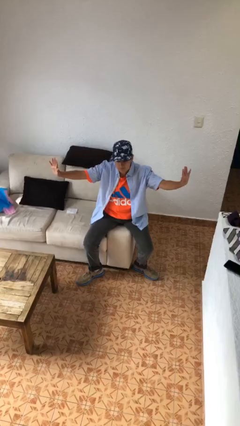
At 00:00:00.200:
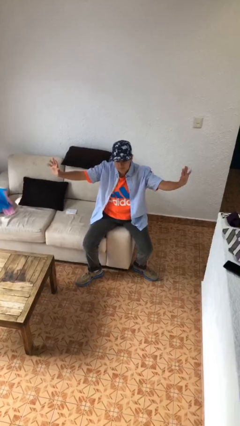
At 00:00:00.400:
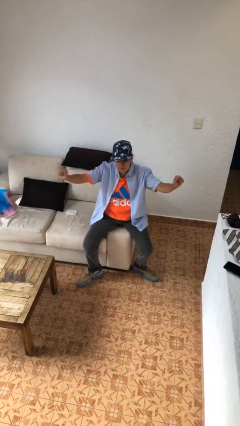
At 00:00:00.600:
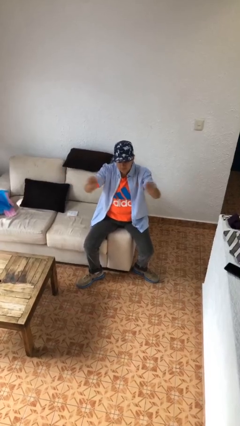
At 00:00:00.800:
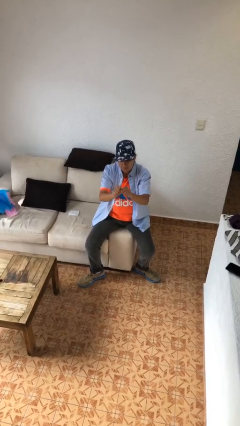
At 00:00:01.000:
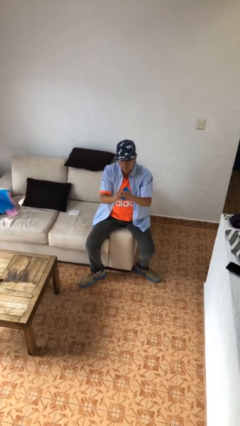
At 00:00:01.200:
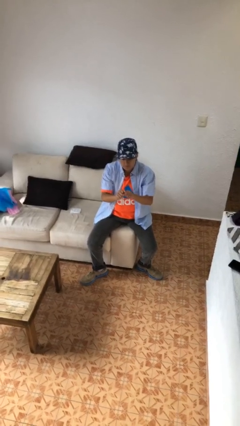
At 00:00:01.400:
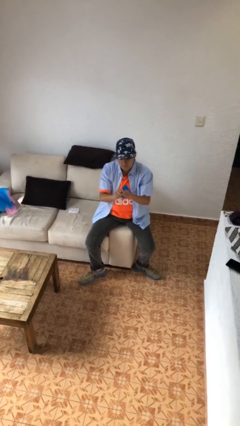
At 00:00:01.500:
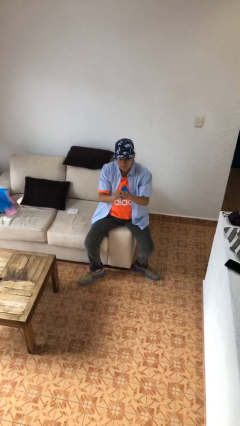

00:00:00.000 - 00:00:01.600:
person gestures zoom out

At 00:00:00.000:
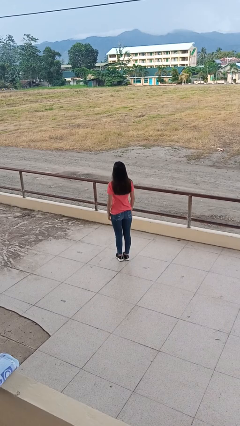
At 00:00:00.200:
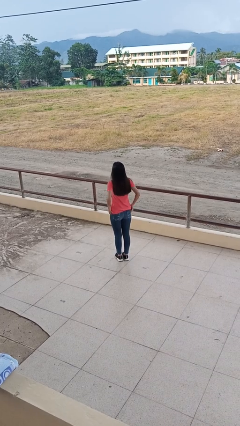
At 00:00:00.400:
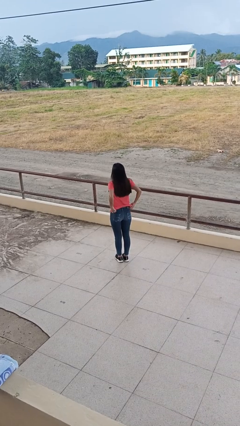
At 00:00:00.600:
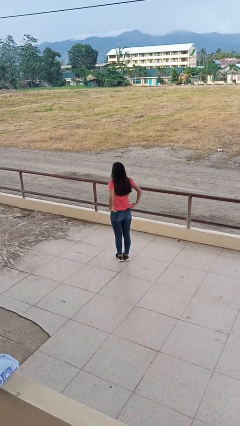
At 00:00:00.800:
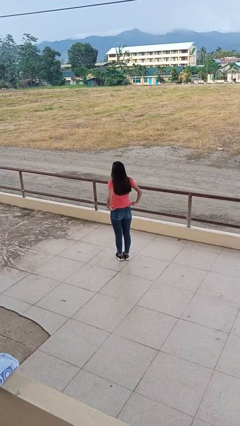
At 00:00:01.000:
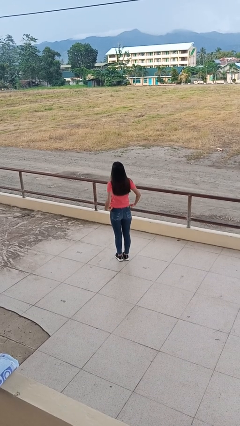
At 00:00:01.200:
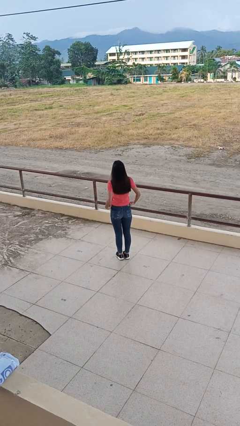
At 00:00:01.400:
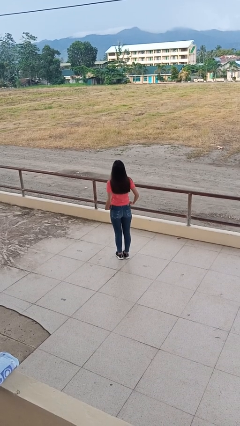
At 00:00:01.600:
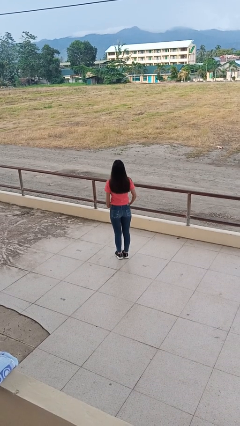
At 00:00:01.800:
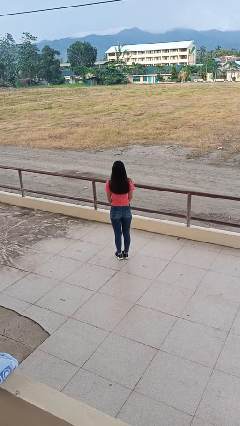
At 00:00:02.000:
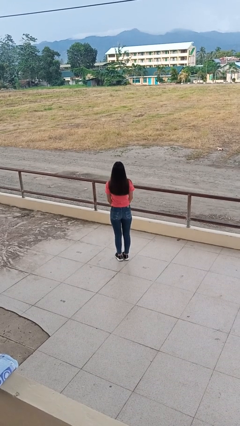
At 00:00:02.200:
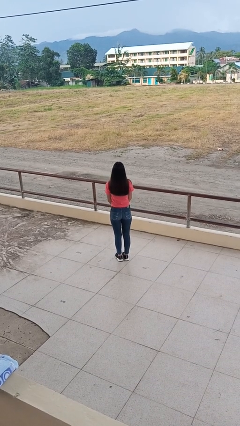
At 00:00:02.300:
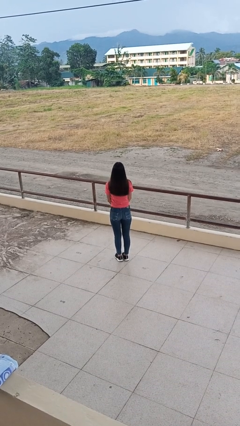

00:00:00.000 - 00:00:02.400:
person tucks in shirt

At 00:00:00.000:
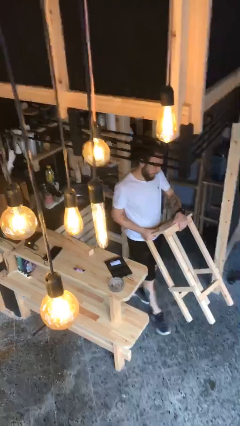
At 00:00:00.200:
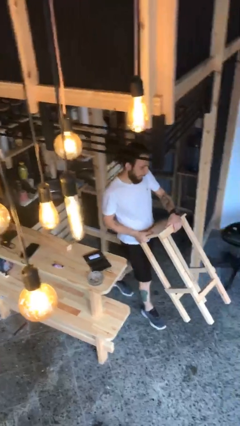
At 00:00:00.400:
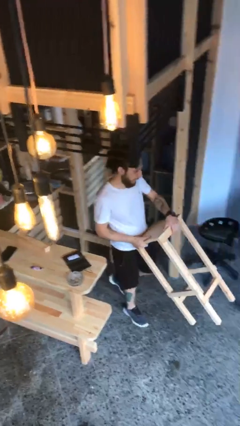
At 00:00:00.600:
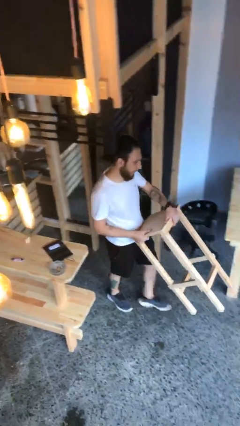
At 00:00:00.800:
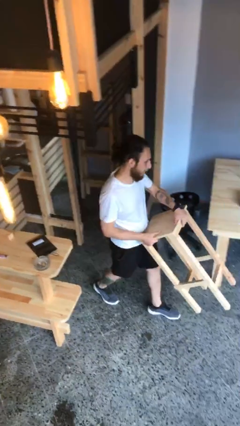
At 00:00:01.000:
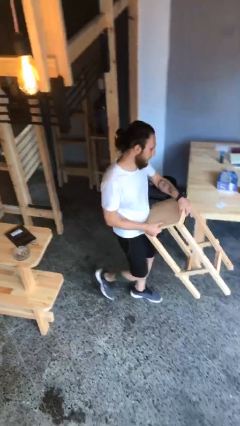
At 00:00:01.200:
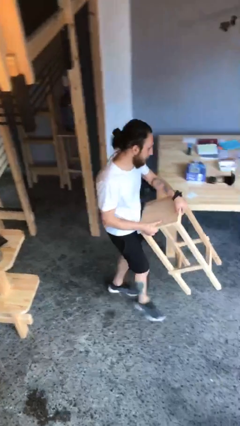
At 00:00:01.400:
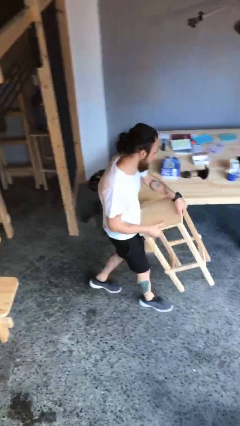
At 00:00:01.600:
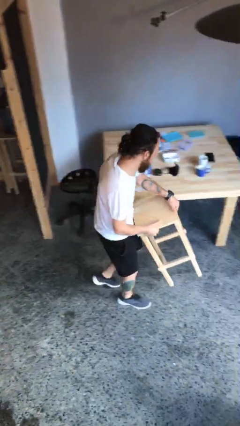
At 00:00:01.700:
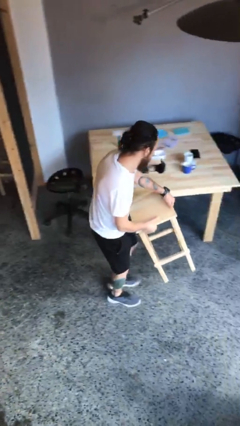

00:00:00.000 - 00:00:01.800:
person carries heavy object

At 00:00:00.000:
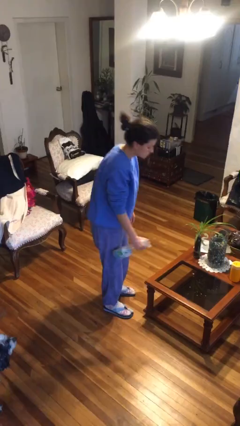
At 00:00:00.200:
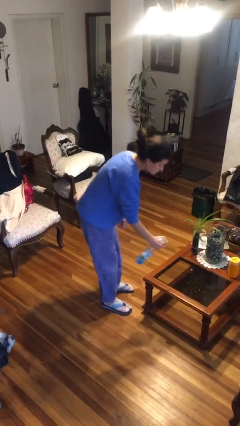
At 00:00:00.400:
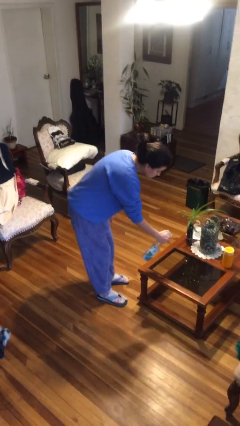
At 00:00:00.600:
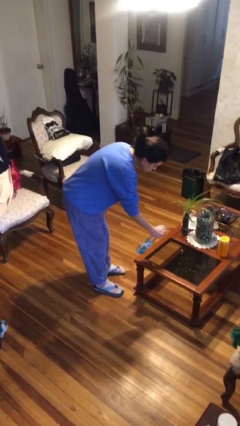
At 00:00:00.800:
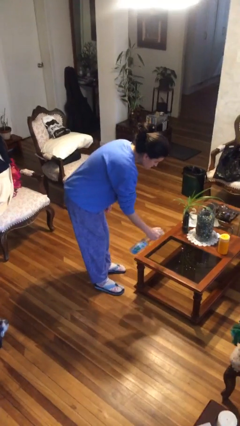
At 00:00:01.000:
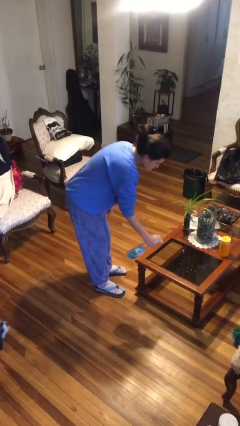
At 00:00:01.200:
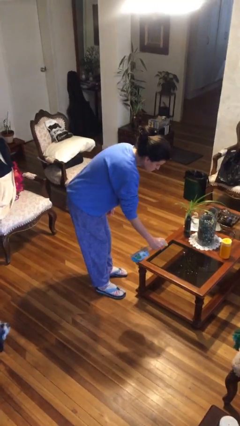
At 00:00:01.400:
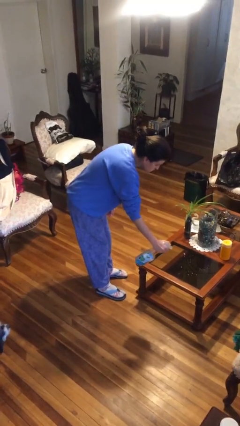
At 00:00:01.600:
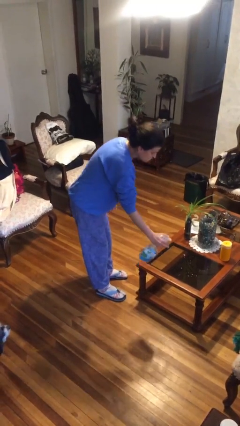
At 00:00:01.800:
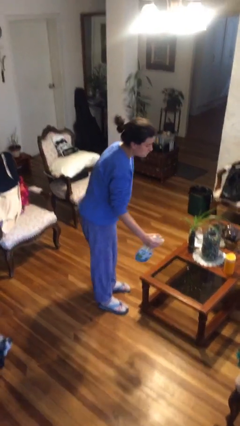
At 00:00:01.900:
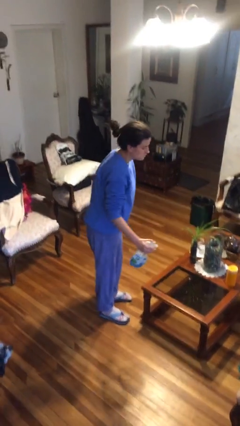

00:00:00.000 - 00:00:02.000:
person sprays from bottle

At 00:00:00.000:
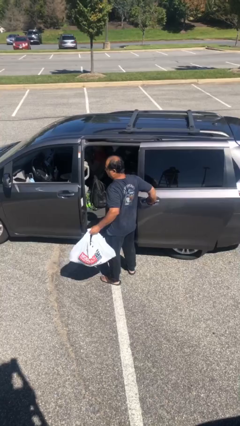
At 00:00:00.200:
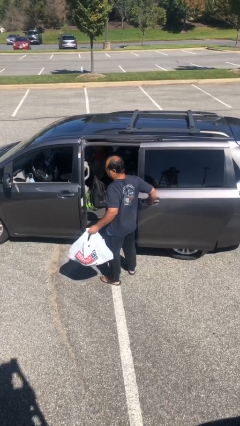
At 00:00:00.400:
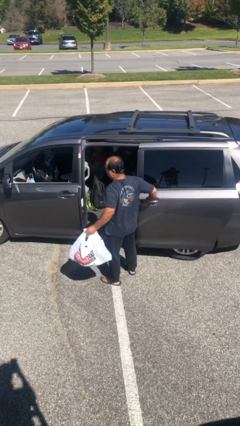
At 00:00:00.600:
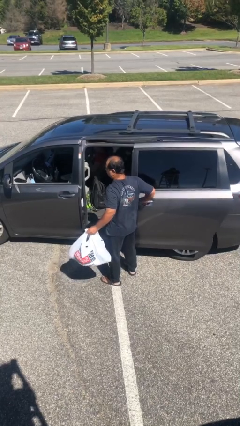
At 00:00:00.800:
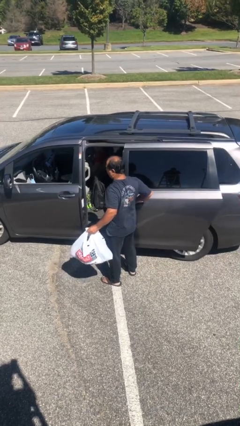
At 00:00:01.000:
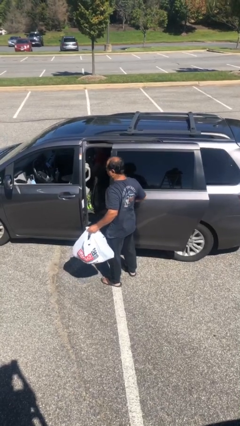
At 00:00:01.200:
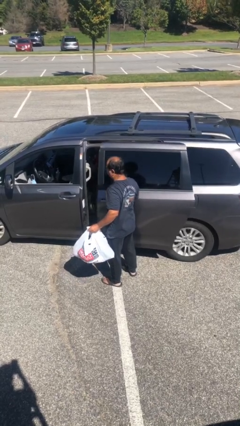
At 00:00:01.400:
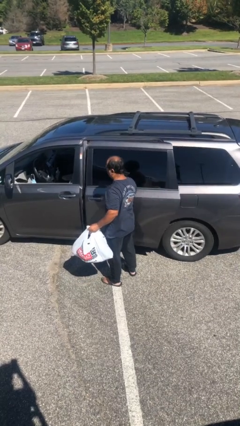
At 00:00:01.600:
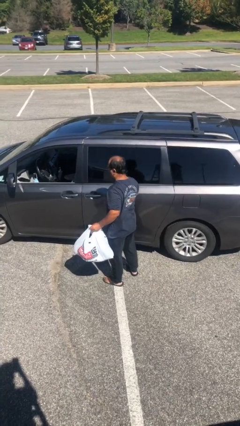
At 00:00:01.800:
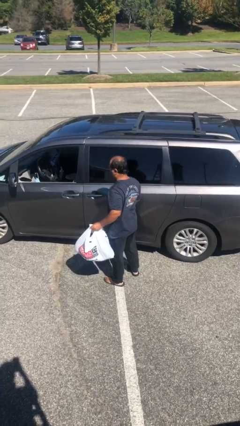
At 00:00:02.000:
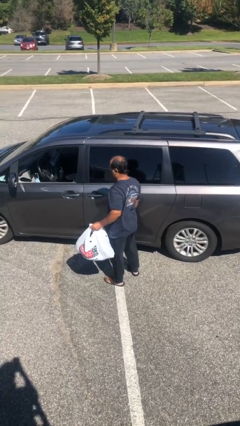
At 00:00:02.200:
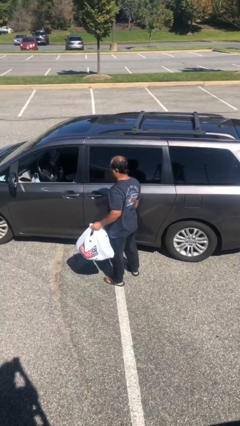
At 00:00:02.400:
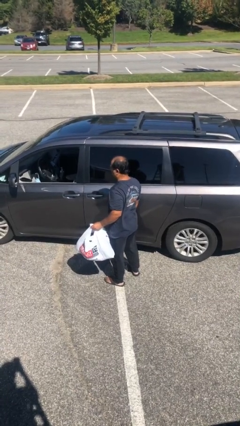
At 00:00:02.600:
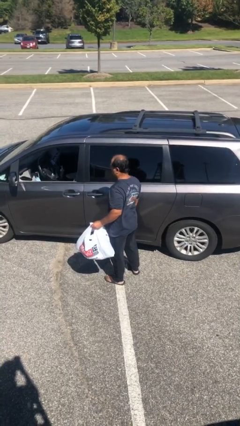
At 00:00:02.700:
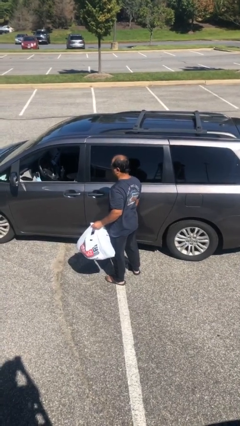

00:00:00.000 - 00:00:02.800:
person closes car door

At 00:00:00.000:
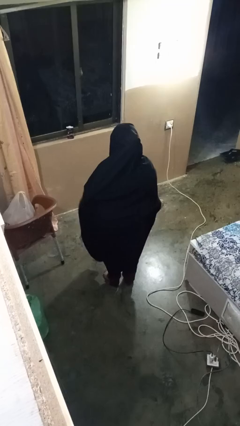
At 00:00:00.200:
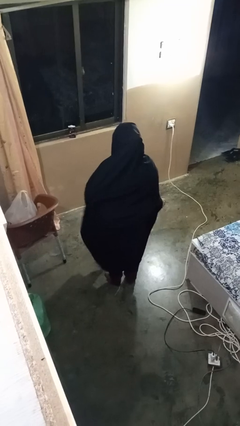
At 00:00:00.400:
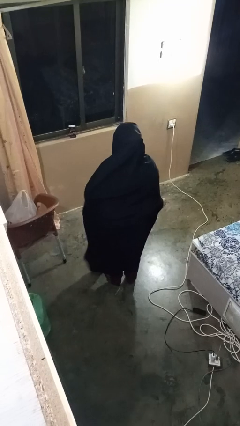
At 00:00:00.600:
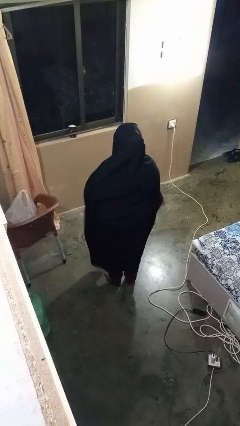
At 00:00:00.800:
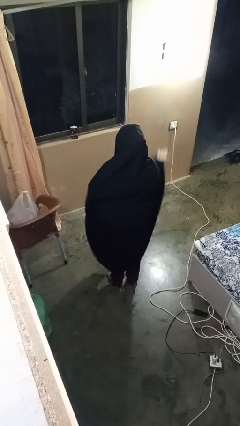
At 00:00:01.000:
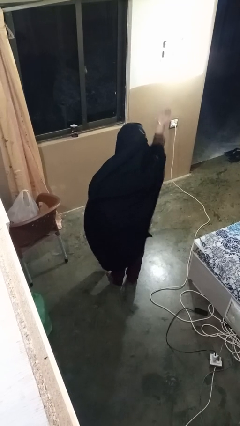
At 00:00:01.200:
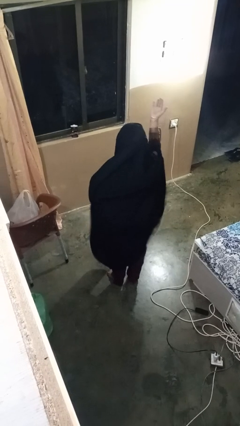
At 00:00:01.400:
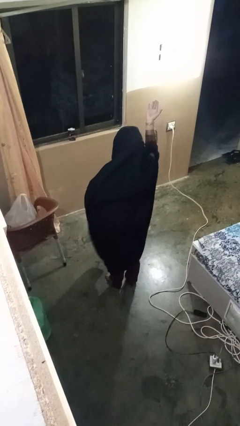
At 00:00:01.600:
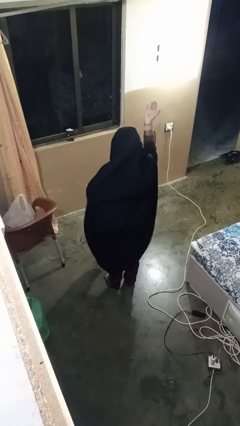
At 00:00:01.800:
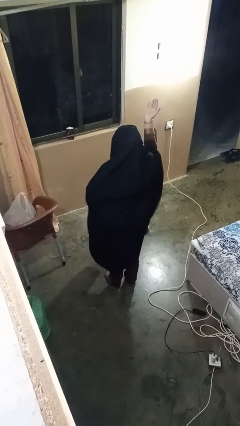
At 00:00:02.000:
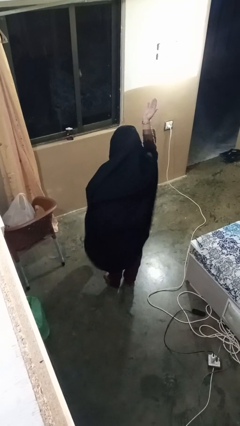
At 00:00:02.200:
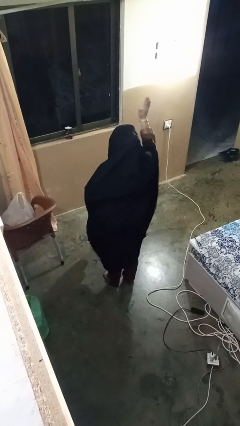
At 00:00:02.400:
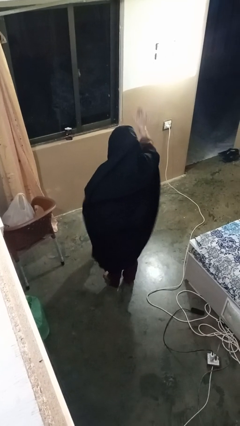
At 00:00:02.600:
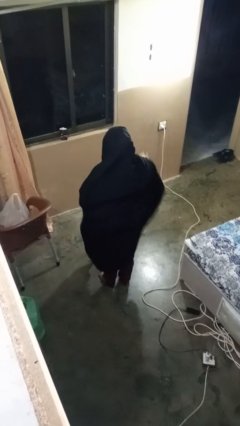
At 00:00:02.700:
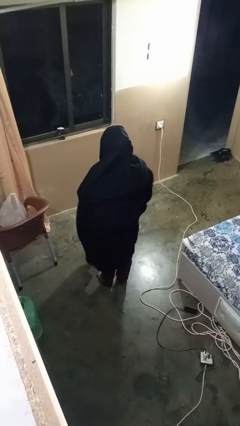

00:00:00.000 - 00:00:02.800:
person gestures swipe up

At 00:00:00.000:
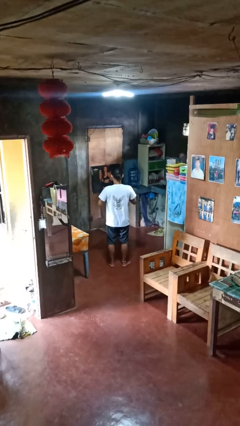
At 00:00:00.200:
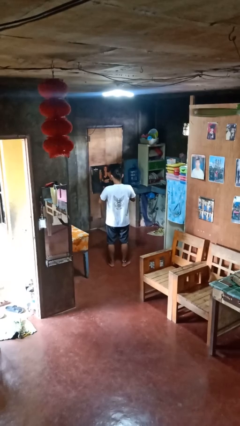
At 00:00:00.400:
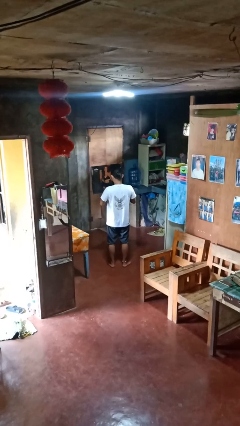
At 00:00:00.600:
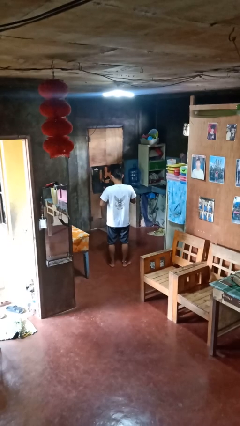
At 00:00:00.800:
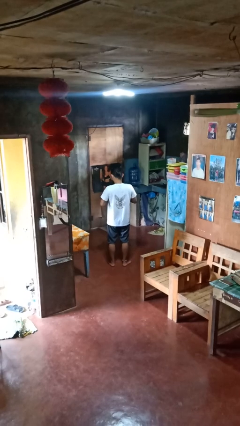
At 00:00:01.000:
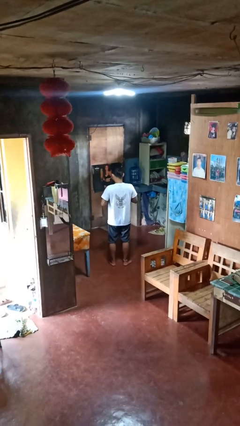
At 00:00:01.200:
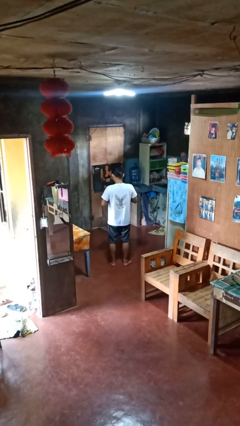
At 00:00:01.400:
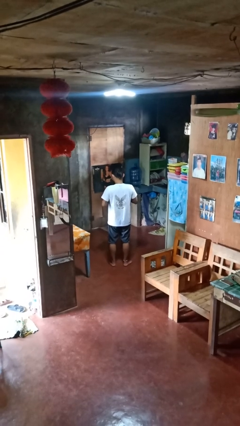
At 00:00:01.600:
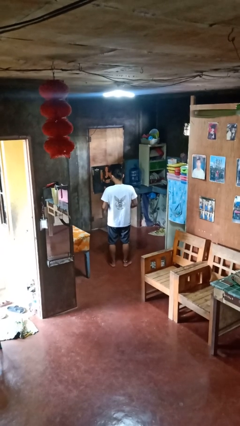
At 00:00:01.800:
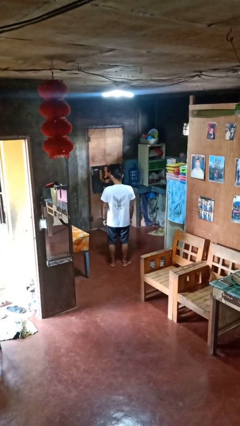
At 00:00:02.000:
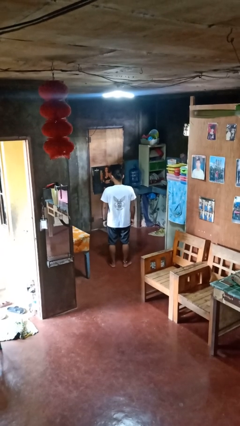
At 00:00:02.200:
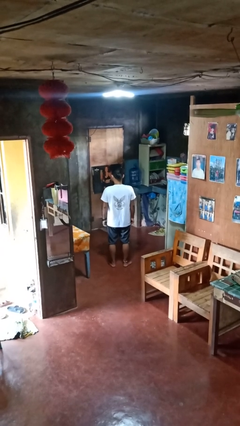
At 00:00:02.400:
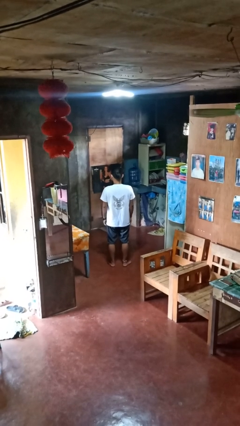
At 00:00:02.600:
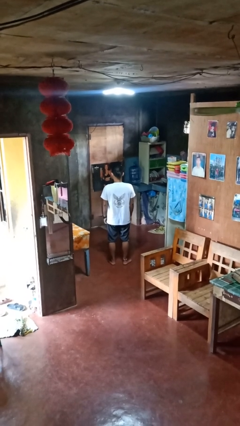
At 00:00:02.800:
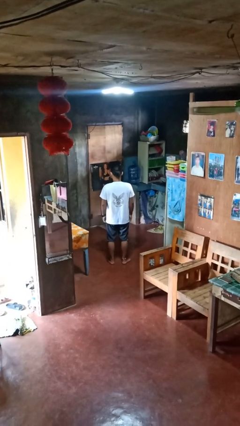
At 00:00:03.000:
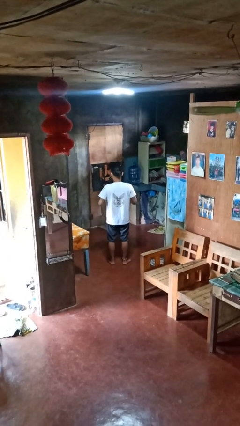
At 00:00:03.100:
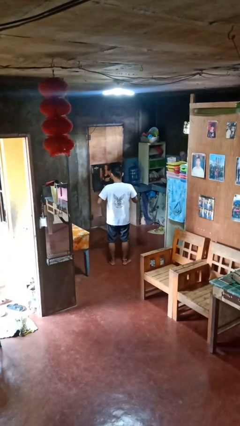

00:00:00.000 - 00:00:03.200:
person unbuttons shirt
